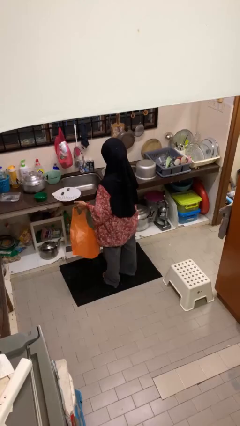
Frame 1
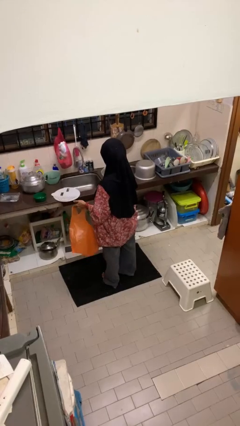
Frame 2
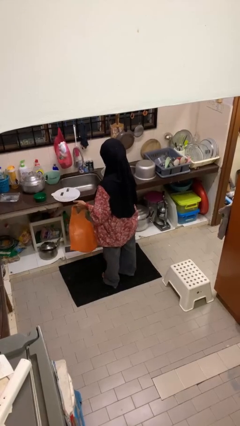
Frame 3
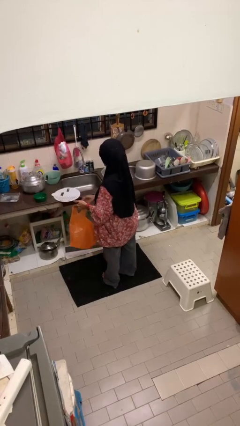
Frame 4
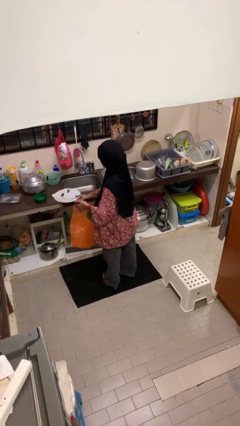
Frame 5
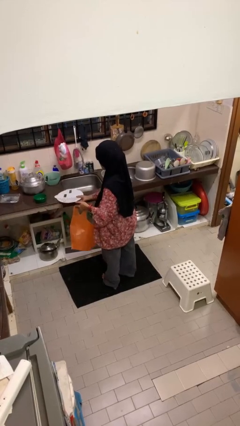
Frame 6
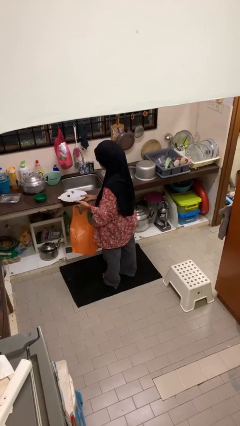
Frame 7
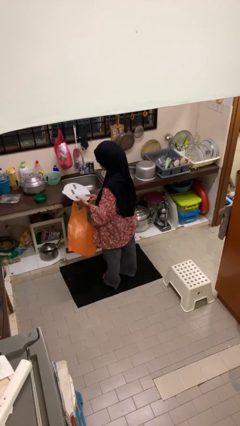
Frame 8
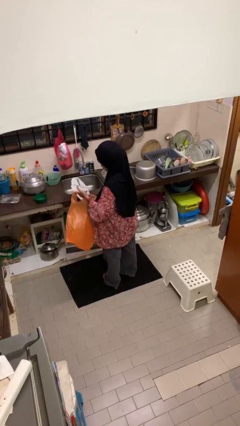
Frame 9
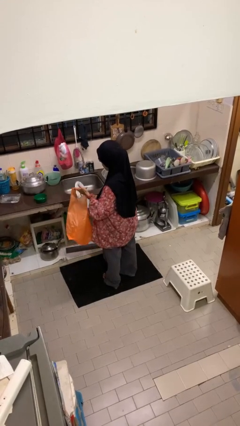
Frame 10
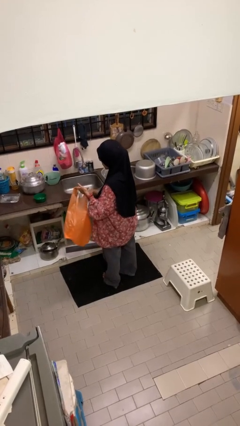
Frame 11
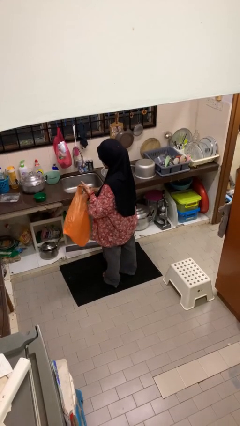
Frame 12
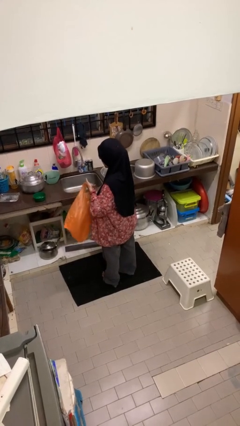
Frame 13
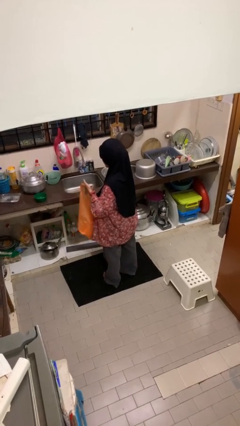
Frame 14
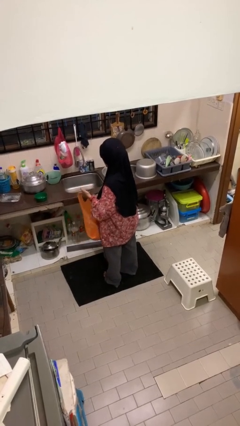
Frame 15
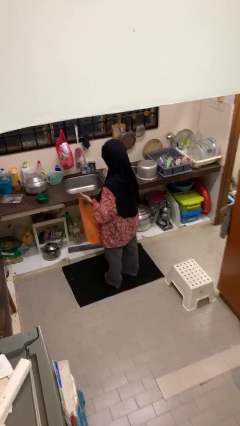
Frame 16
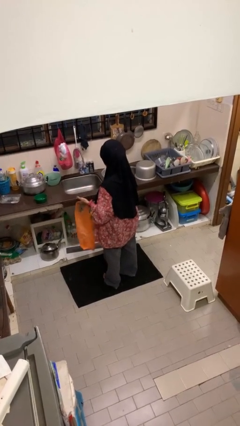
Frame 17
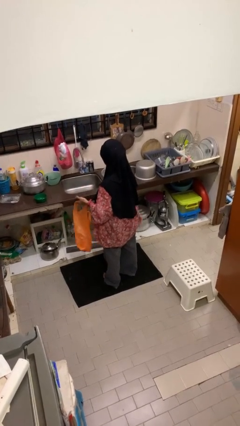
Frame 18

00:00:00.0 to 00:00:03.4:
person puts object into bag

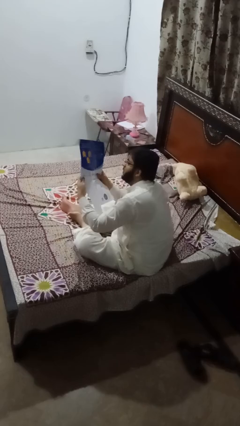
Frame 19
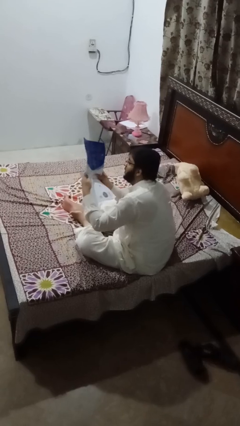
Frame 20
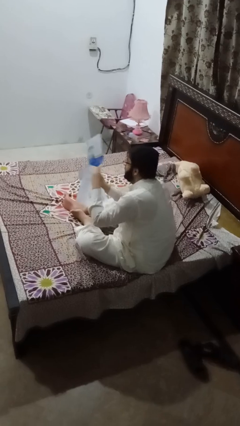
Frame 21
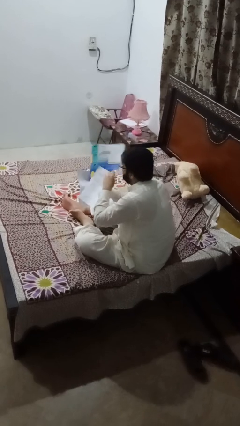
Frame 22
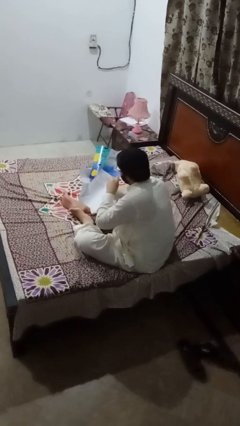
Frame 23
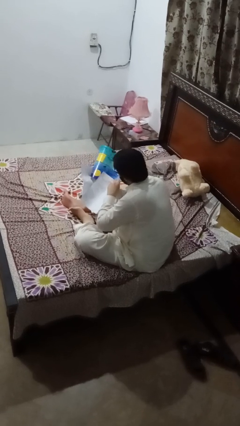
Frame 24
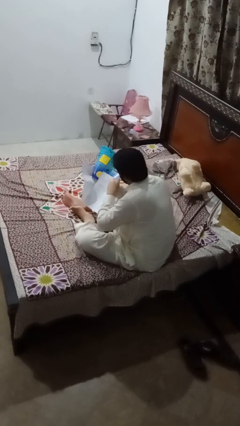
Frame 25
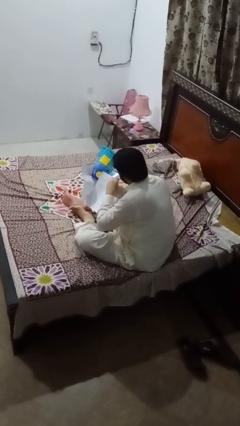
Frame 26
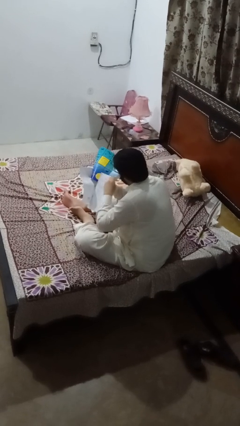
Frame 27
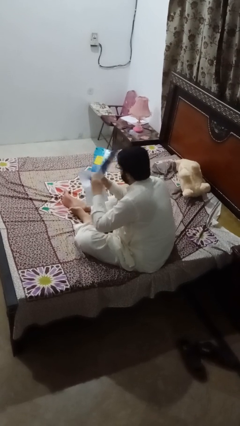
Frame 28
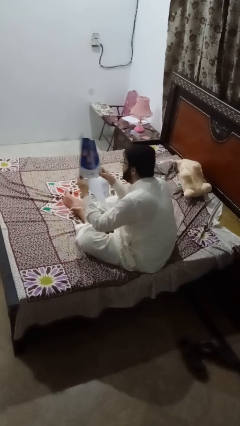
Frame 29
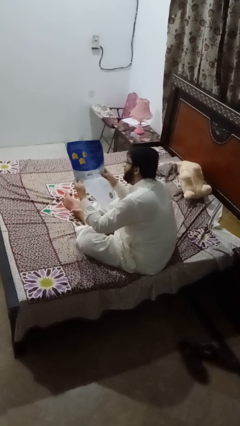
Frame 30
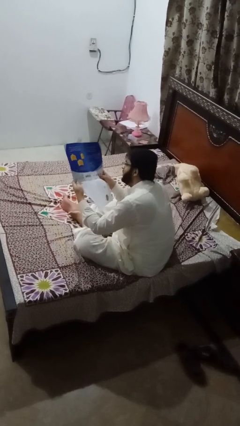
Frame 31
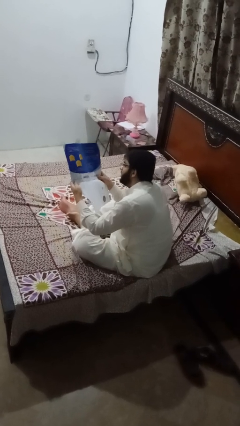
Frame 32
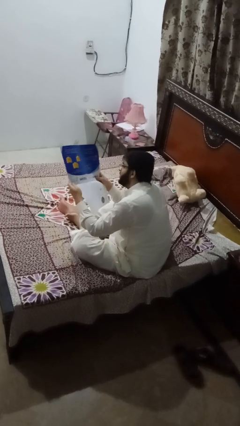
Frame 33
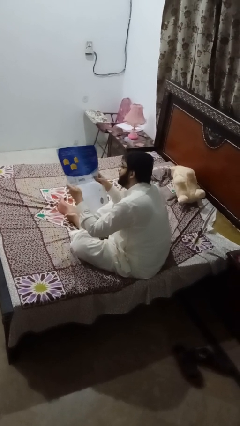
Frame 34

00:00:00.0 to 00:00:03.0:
person reads newspaper

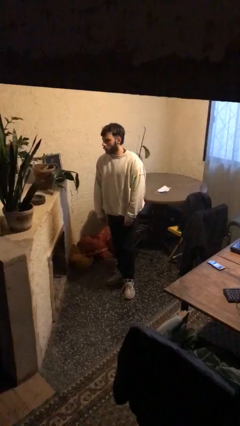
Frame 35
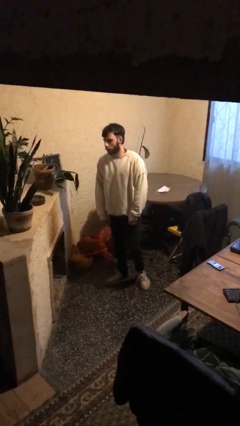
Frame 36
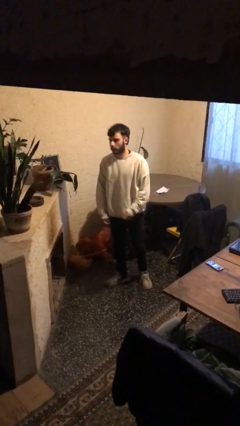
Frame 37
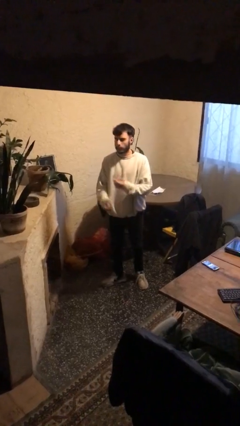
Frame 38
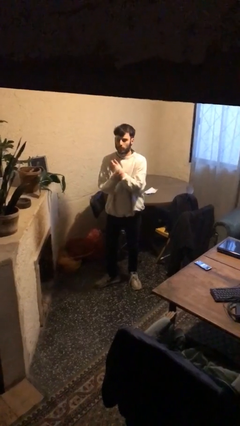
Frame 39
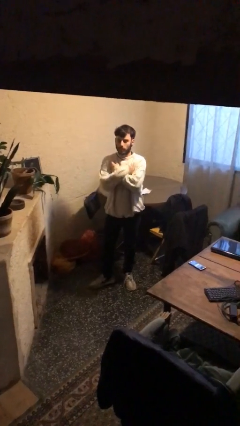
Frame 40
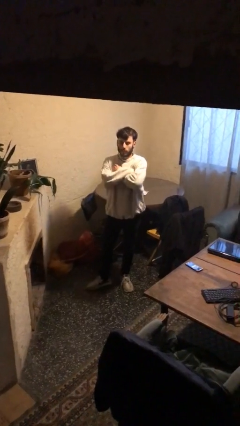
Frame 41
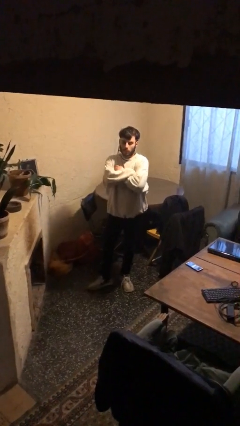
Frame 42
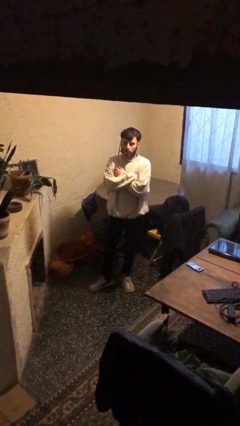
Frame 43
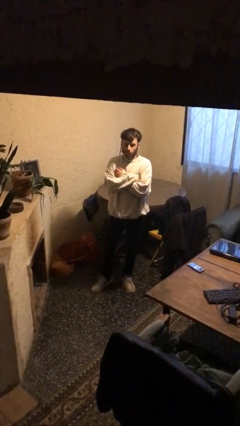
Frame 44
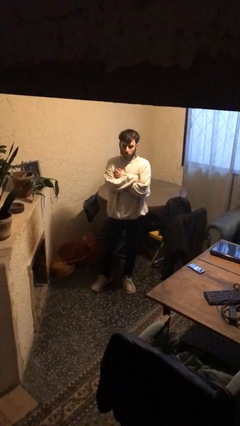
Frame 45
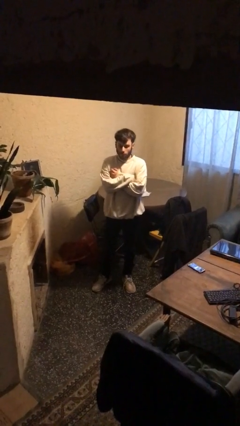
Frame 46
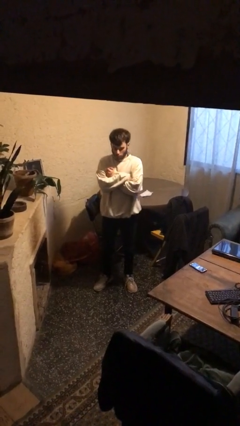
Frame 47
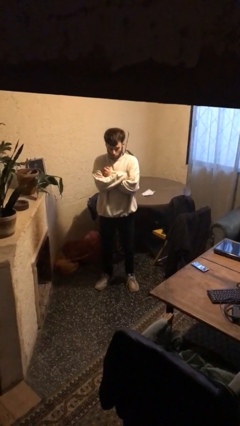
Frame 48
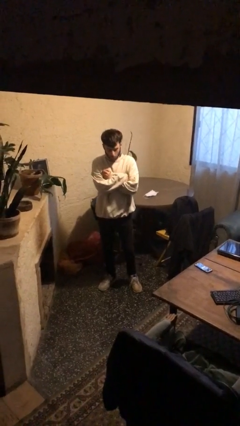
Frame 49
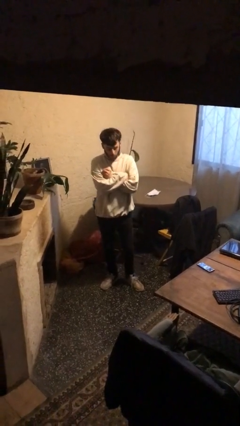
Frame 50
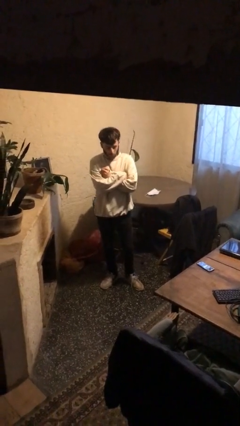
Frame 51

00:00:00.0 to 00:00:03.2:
person crosses arms

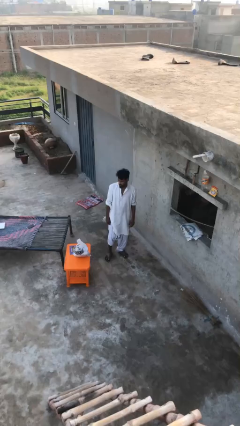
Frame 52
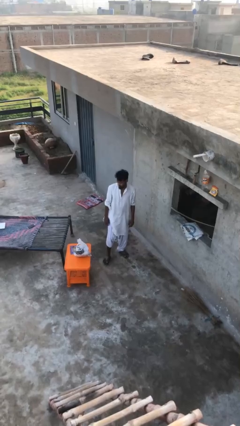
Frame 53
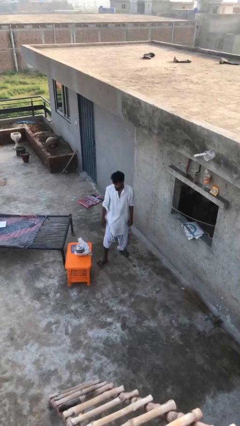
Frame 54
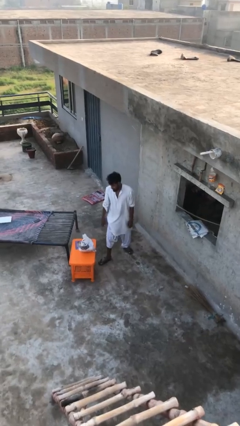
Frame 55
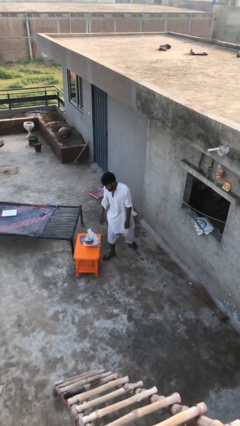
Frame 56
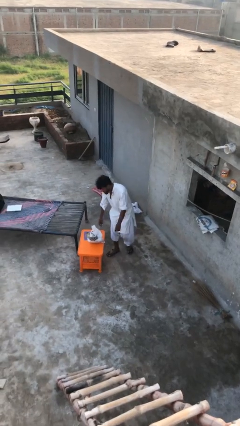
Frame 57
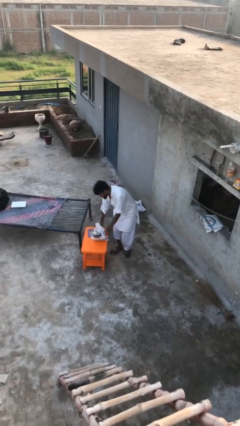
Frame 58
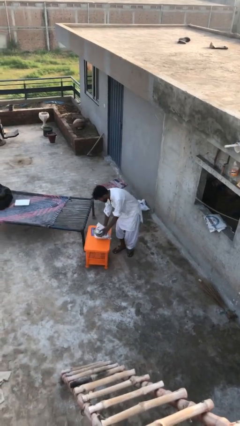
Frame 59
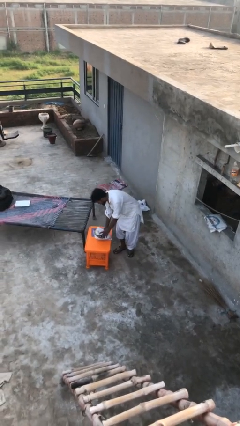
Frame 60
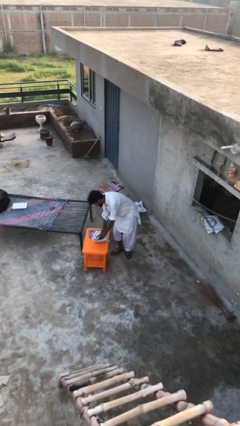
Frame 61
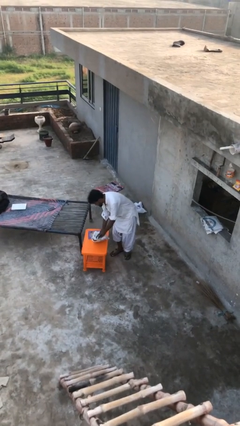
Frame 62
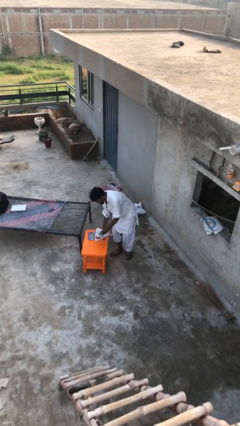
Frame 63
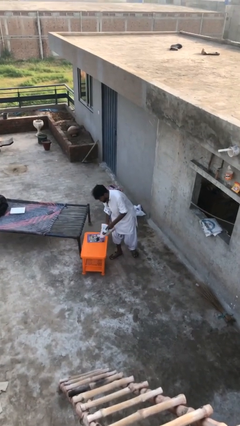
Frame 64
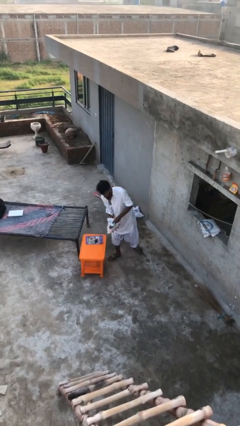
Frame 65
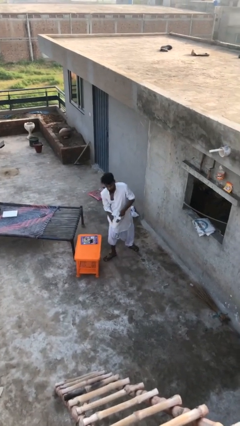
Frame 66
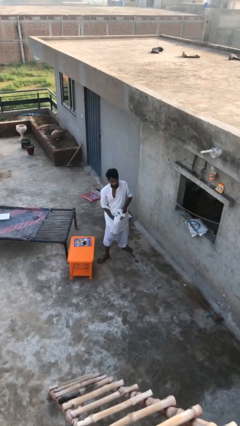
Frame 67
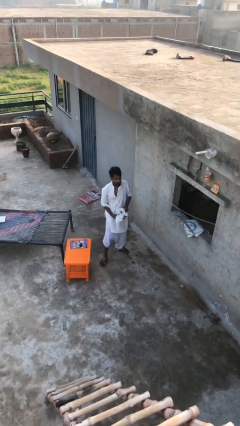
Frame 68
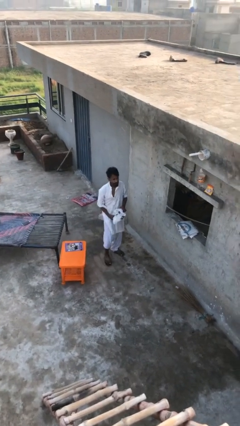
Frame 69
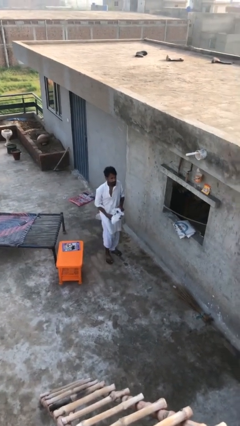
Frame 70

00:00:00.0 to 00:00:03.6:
person picks up object from table

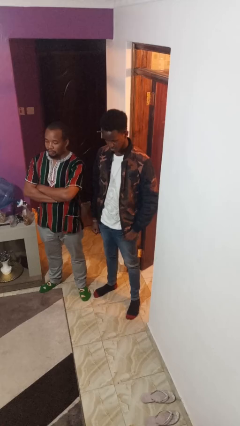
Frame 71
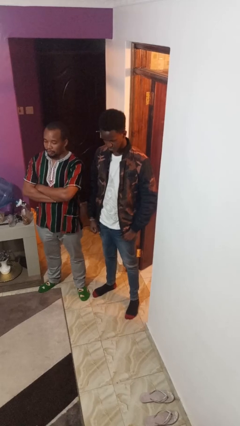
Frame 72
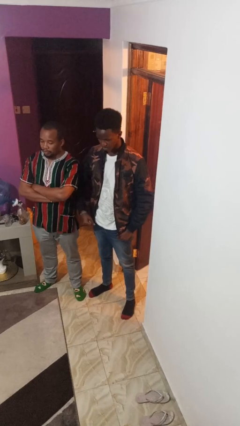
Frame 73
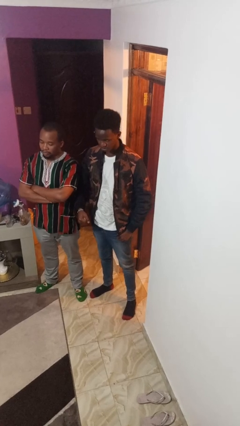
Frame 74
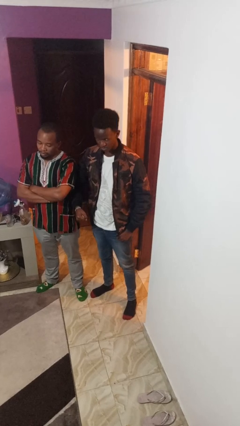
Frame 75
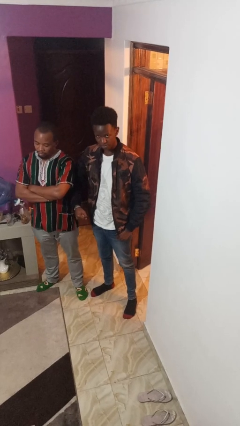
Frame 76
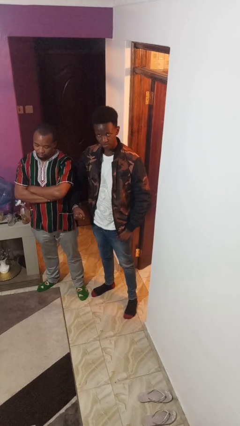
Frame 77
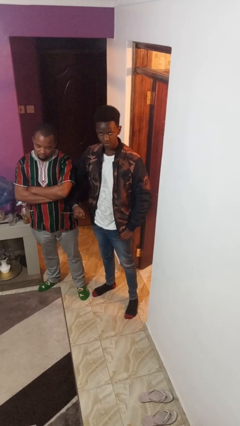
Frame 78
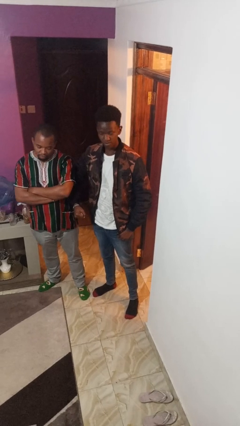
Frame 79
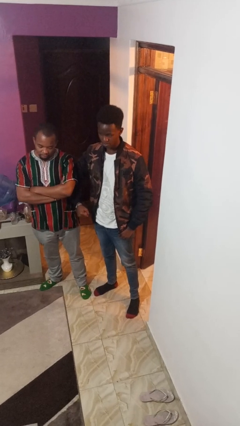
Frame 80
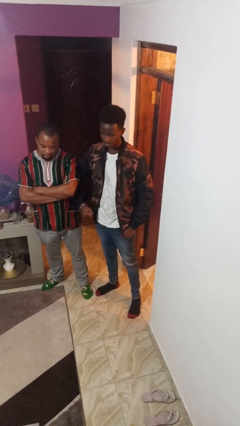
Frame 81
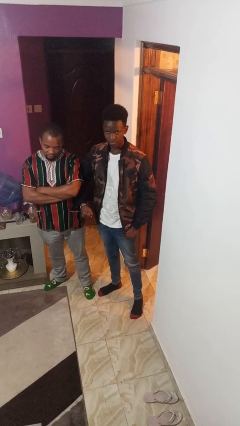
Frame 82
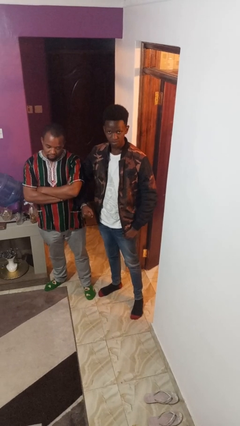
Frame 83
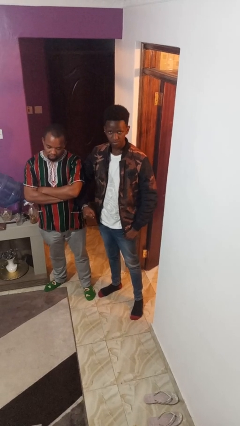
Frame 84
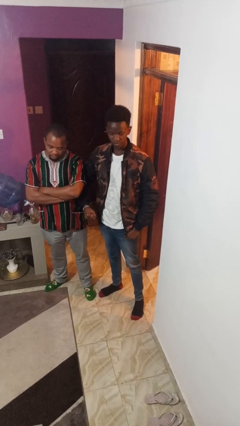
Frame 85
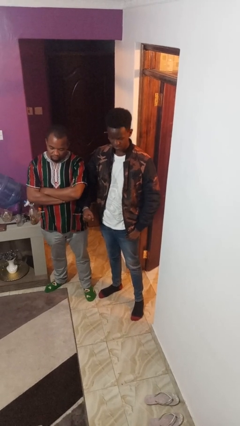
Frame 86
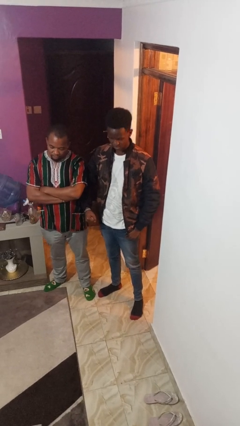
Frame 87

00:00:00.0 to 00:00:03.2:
person nudges person with elbow

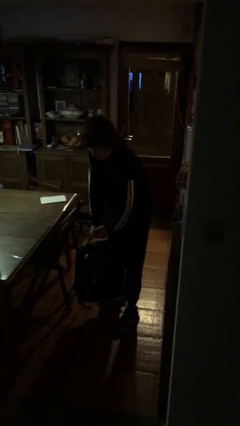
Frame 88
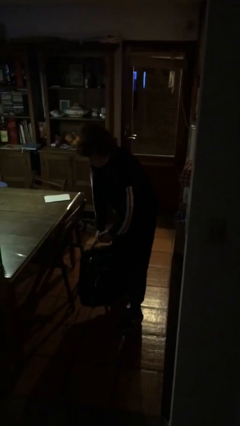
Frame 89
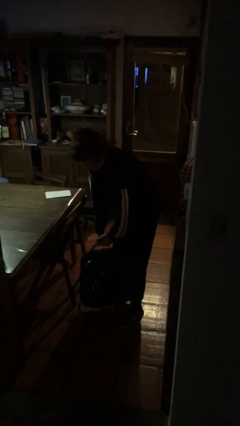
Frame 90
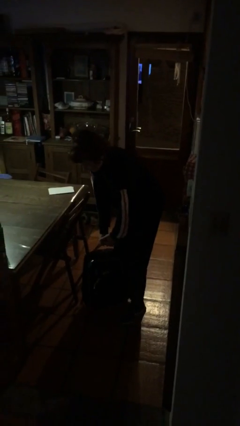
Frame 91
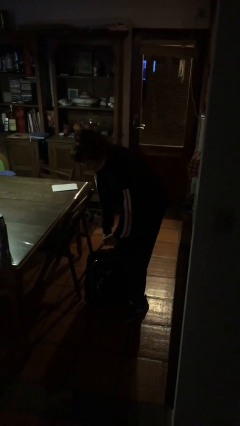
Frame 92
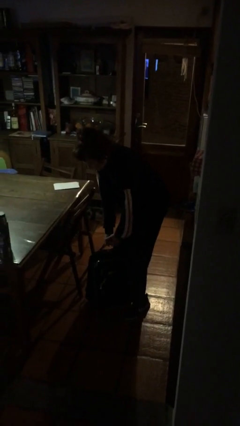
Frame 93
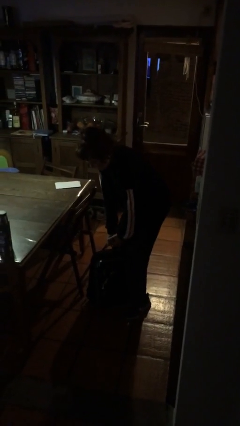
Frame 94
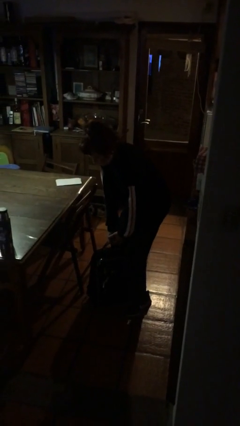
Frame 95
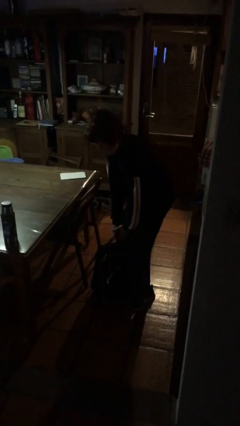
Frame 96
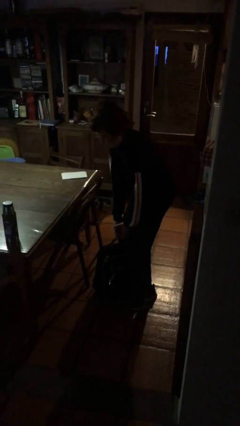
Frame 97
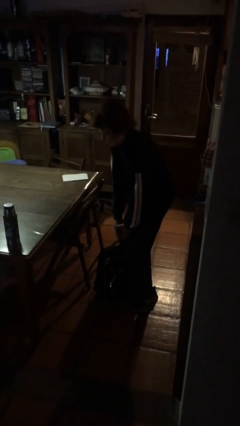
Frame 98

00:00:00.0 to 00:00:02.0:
person puts down object on floor
